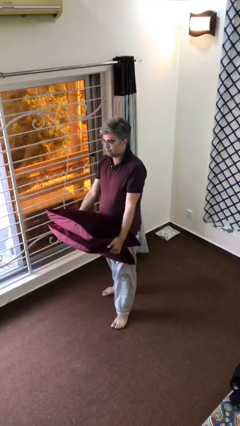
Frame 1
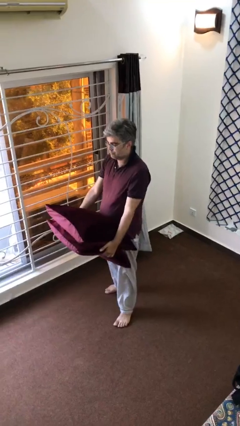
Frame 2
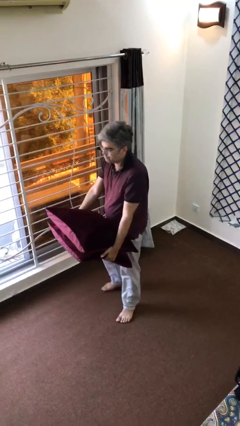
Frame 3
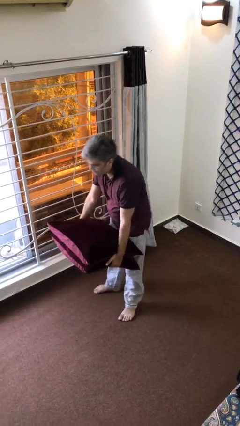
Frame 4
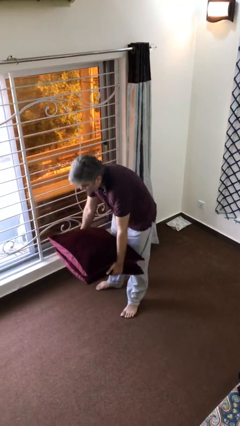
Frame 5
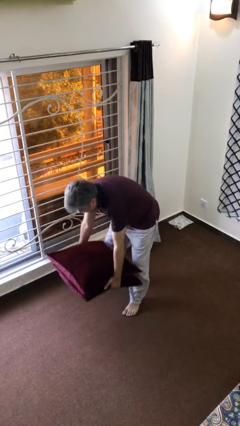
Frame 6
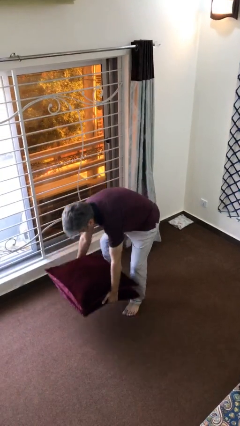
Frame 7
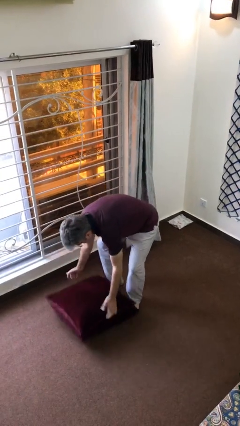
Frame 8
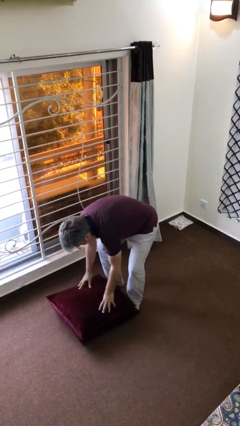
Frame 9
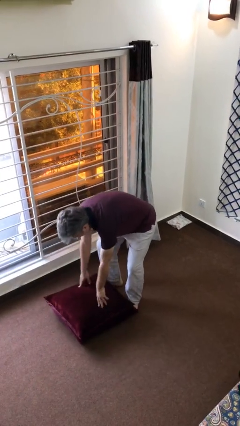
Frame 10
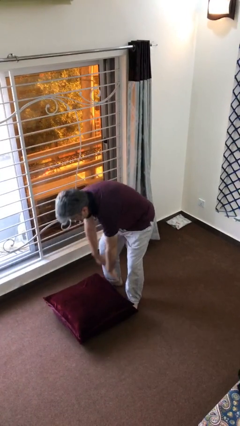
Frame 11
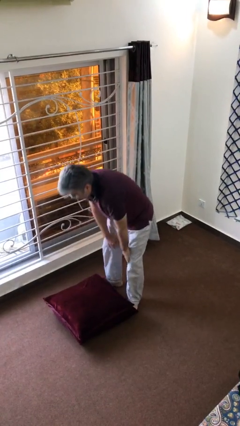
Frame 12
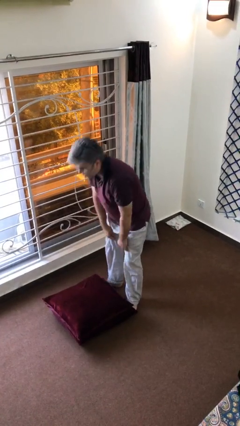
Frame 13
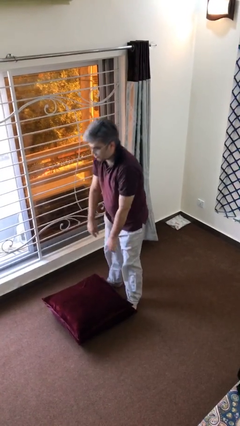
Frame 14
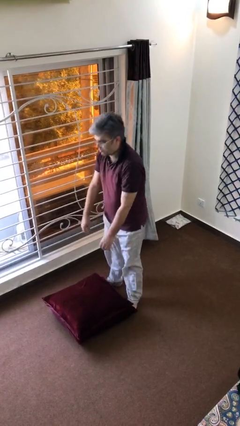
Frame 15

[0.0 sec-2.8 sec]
person puts down object on floor

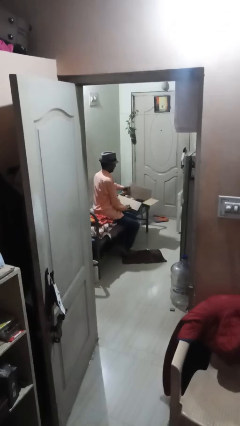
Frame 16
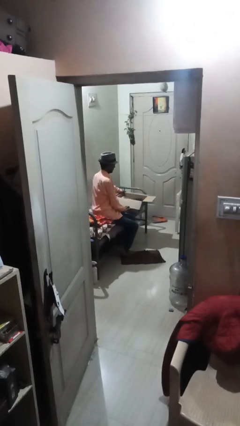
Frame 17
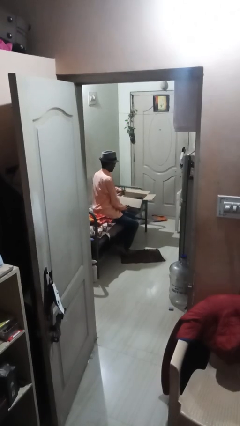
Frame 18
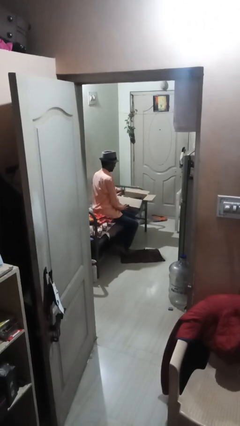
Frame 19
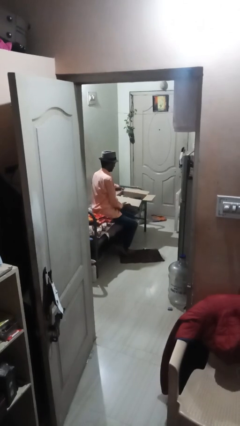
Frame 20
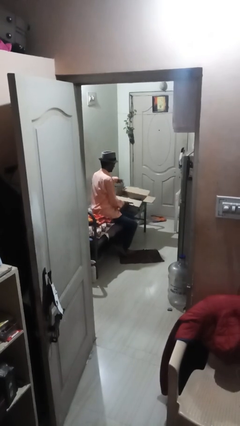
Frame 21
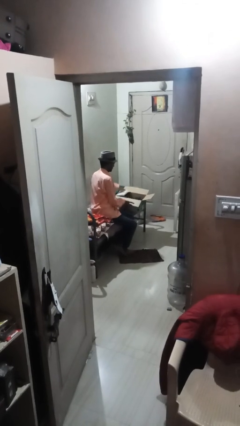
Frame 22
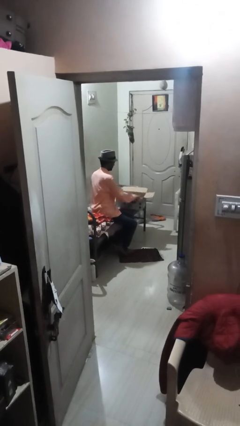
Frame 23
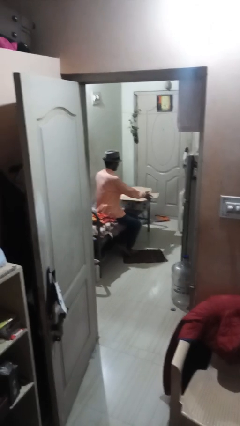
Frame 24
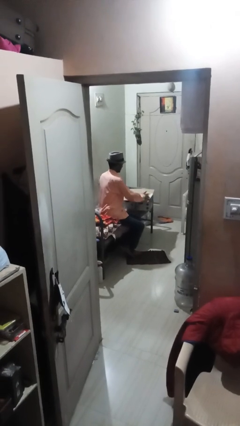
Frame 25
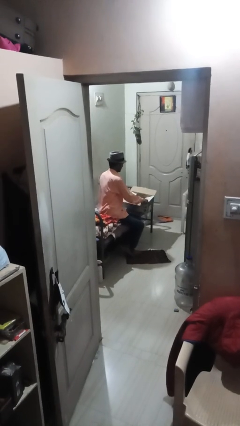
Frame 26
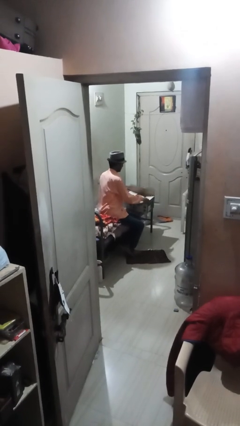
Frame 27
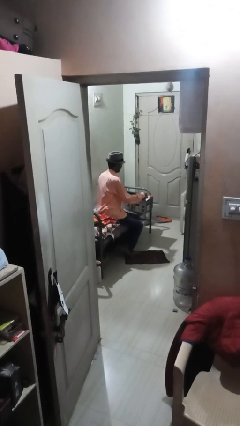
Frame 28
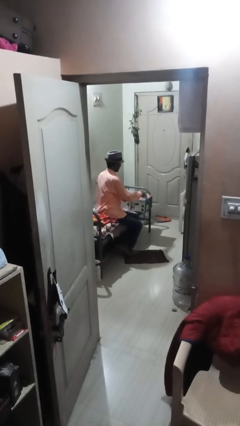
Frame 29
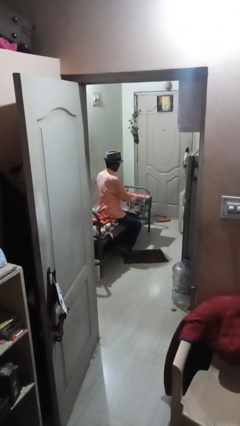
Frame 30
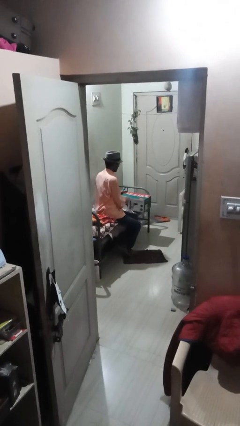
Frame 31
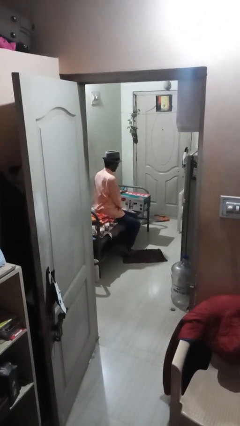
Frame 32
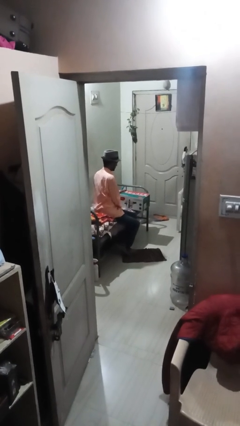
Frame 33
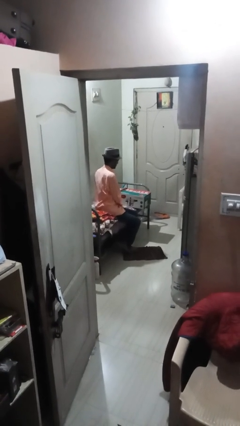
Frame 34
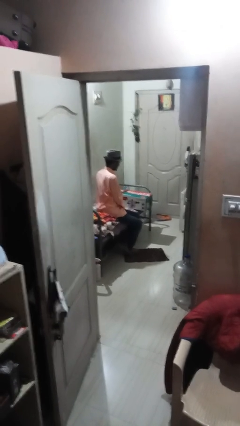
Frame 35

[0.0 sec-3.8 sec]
person closes box

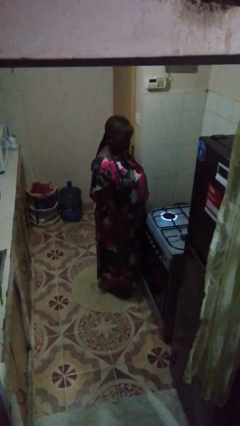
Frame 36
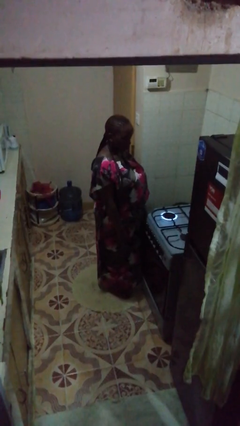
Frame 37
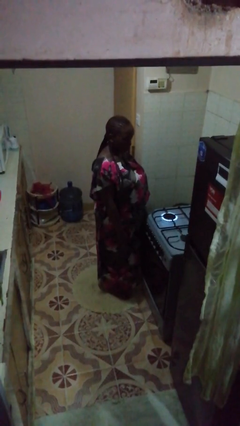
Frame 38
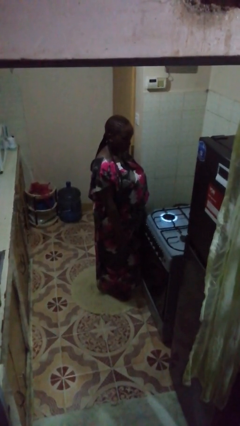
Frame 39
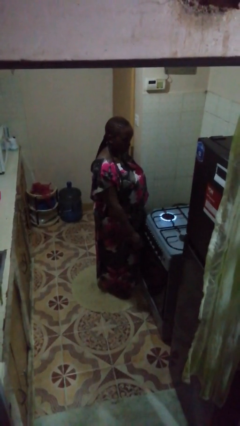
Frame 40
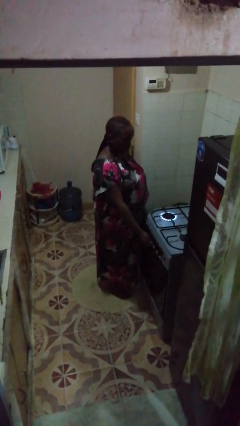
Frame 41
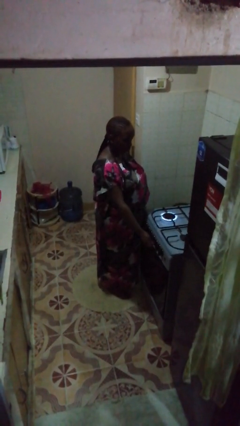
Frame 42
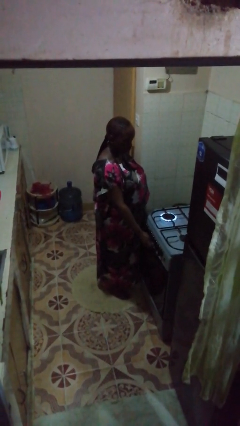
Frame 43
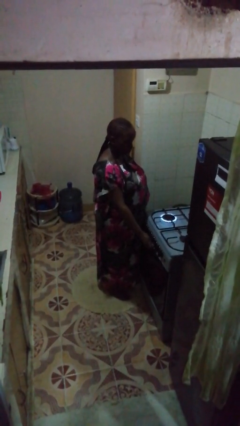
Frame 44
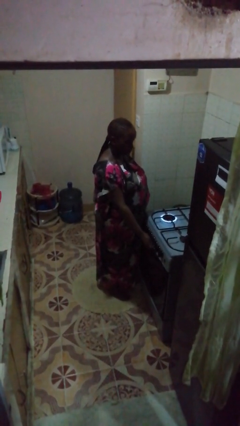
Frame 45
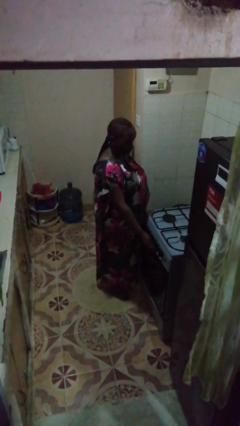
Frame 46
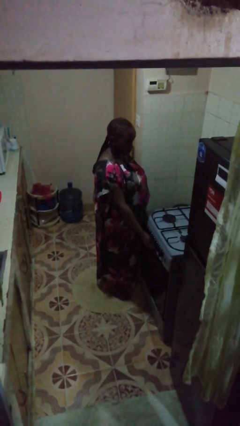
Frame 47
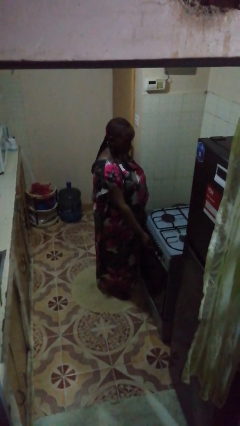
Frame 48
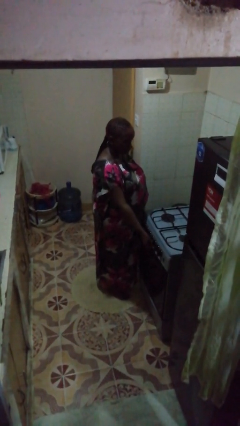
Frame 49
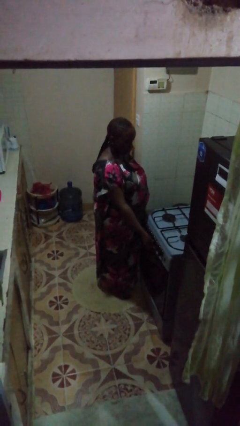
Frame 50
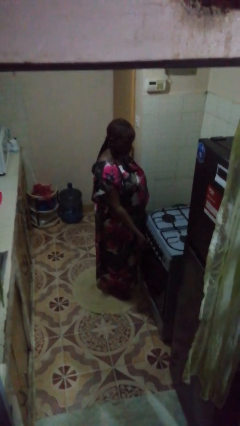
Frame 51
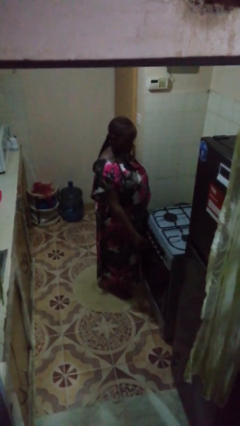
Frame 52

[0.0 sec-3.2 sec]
person turns off stovetop

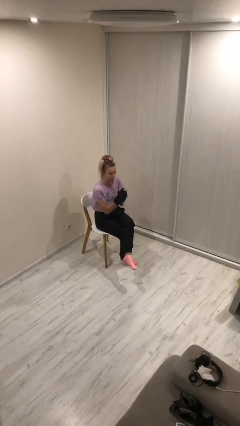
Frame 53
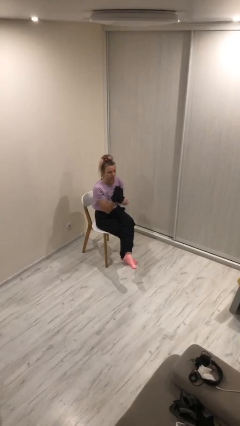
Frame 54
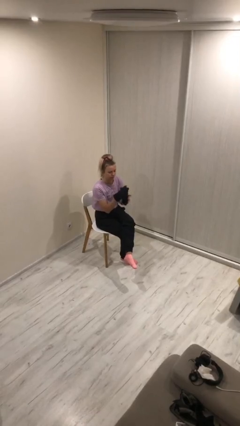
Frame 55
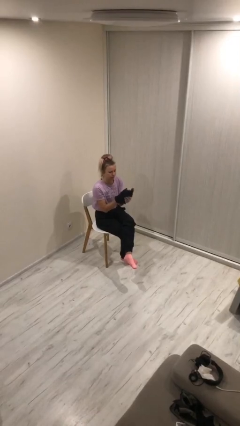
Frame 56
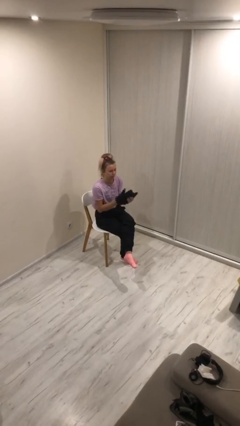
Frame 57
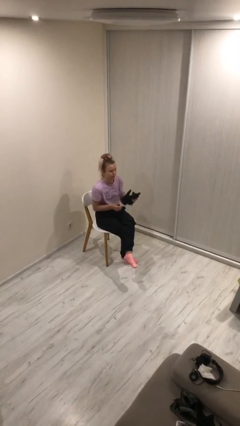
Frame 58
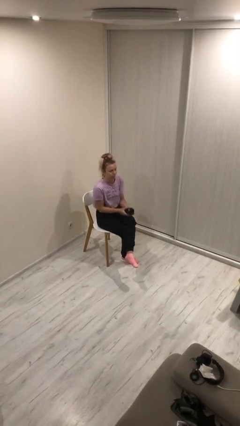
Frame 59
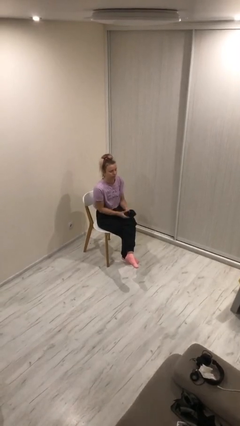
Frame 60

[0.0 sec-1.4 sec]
person takes off gloves

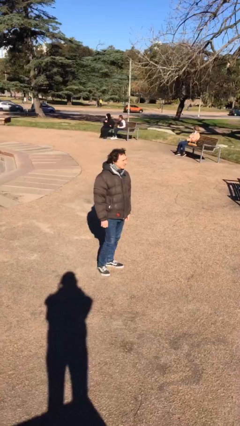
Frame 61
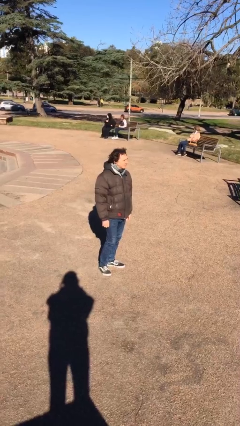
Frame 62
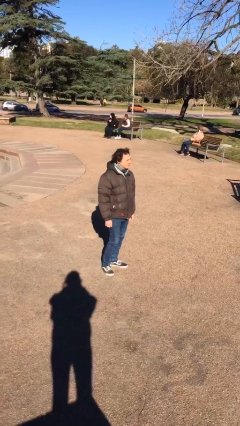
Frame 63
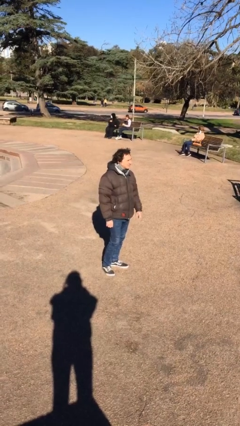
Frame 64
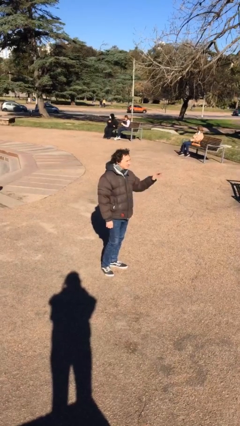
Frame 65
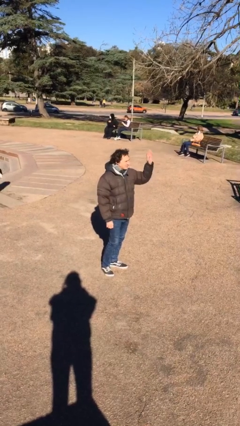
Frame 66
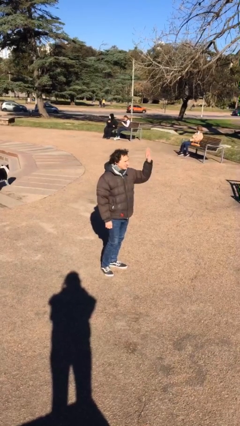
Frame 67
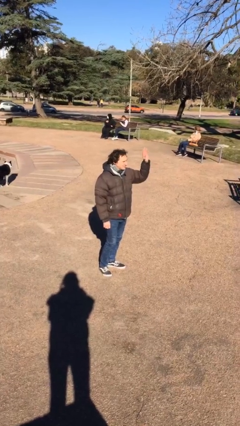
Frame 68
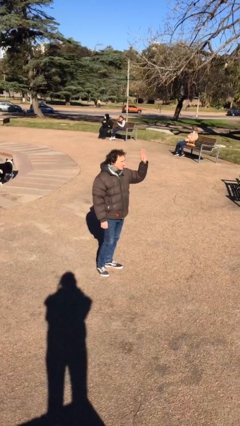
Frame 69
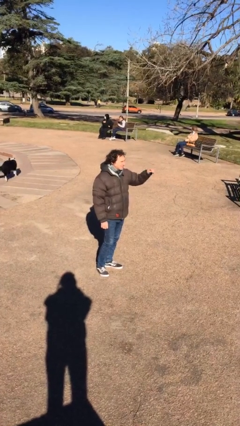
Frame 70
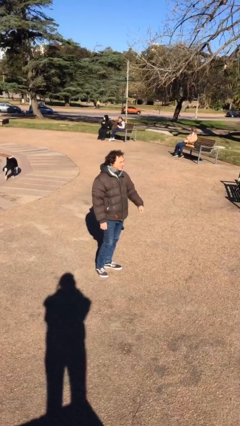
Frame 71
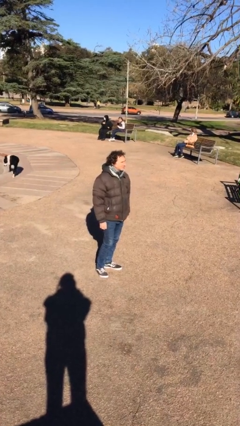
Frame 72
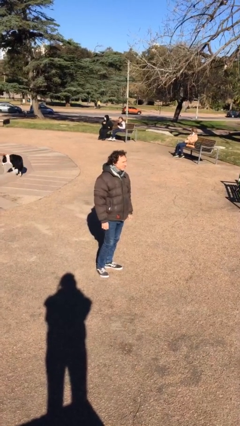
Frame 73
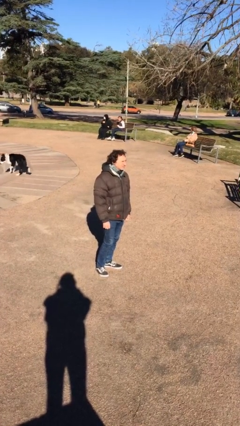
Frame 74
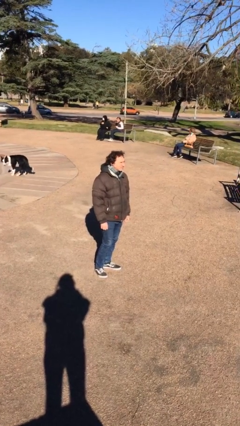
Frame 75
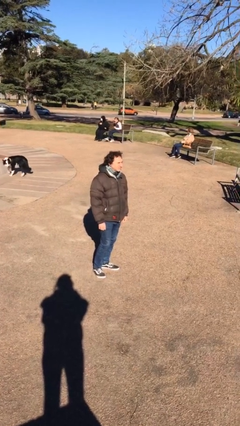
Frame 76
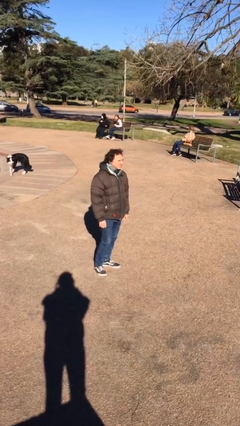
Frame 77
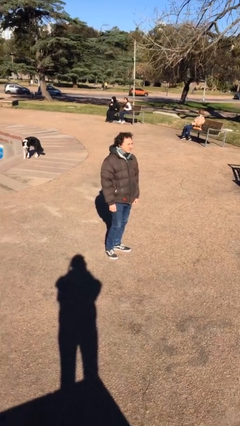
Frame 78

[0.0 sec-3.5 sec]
person waves at person

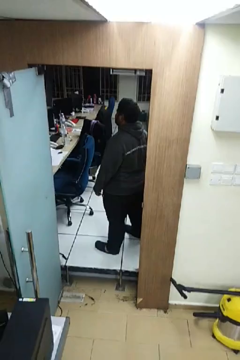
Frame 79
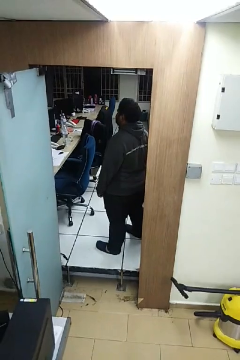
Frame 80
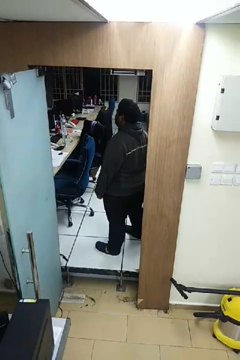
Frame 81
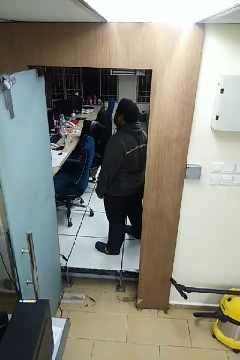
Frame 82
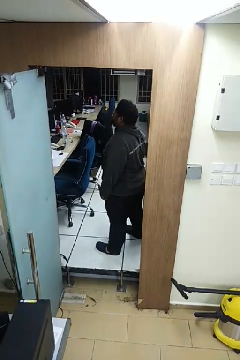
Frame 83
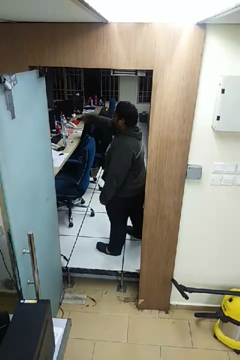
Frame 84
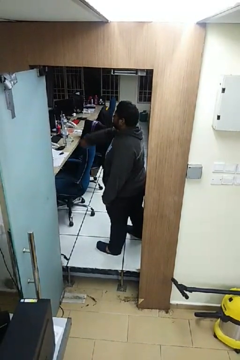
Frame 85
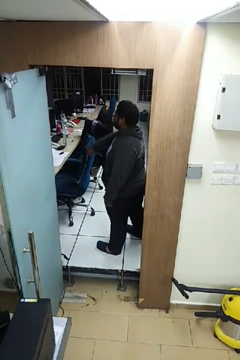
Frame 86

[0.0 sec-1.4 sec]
person punches

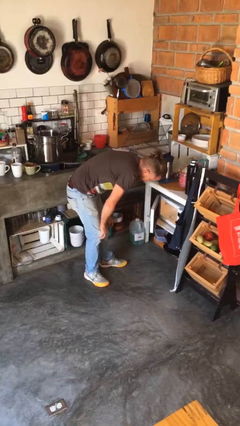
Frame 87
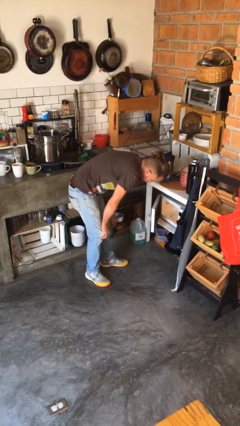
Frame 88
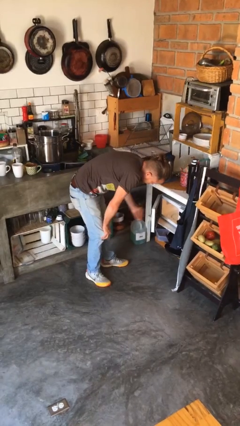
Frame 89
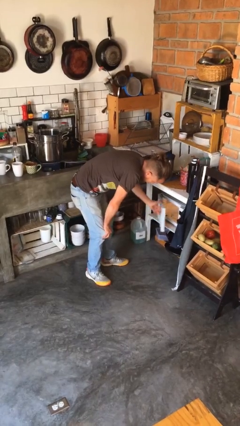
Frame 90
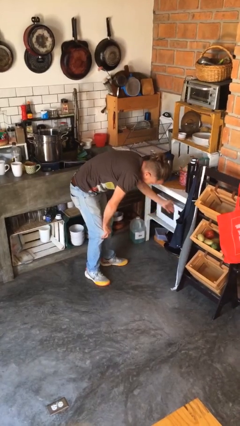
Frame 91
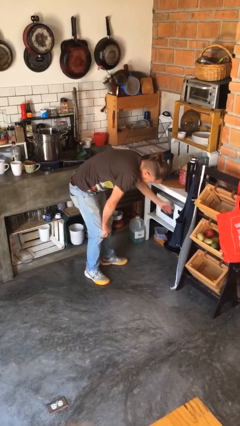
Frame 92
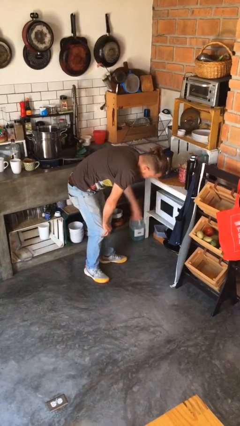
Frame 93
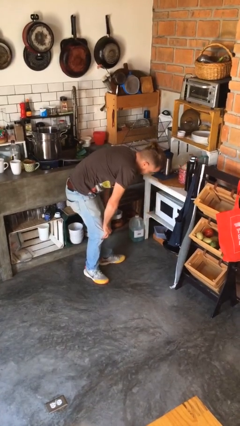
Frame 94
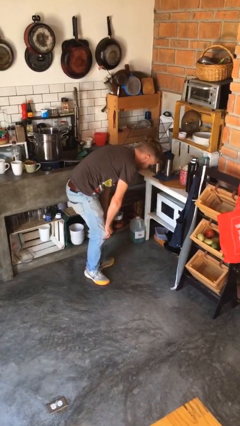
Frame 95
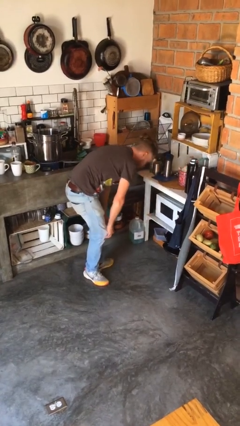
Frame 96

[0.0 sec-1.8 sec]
person closes microwave
